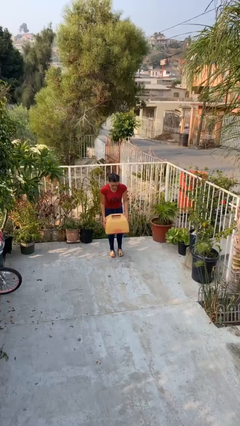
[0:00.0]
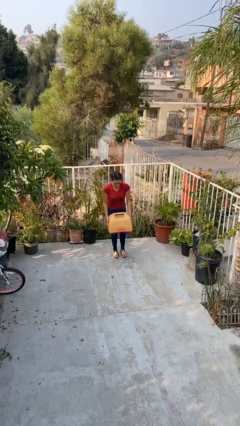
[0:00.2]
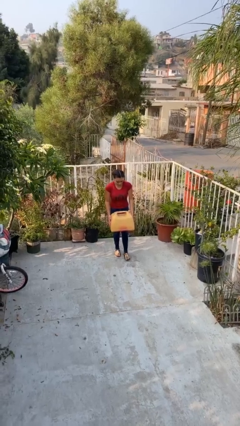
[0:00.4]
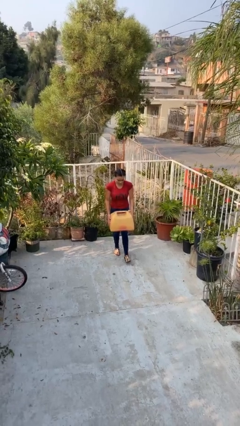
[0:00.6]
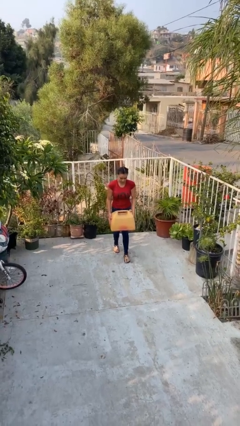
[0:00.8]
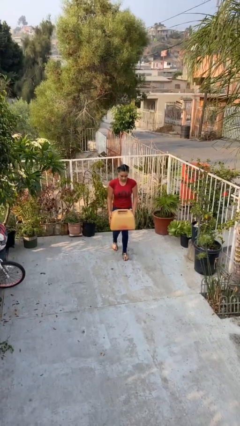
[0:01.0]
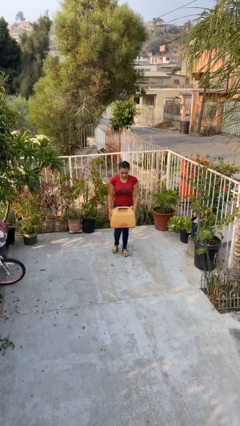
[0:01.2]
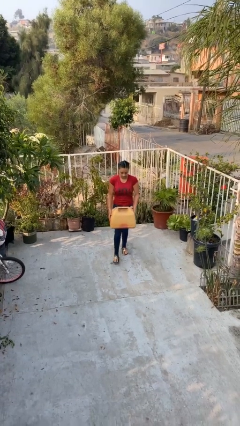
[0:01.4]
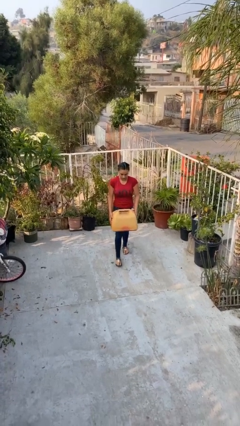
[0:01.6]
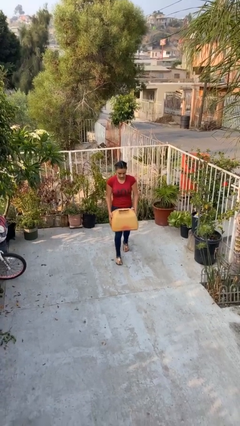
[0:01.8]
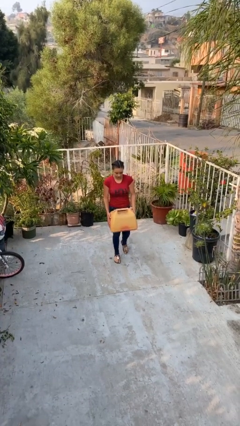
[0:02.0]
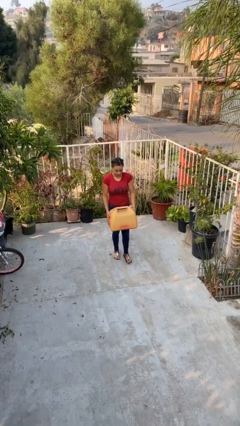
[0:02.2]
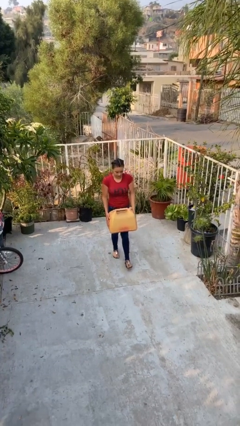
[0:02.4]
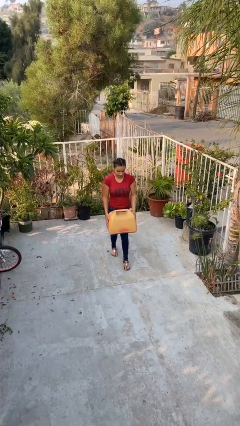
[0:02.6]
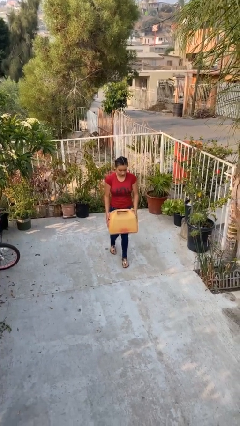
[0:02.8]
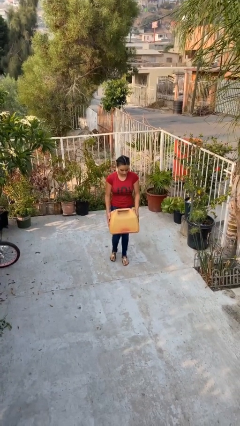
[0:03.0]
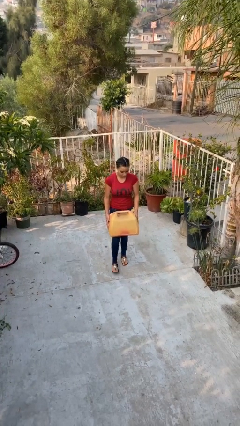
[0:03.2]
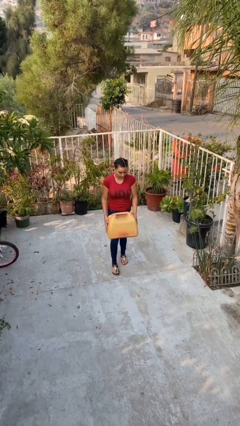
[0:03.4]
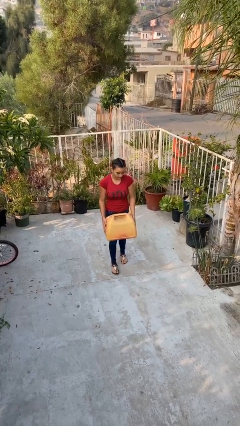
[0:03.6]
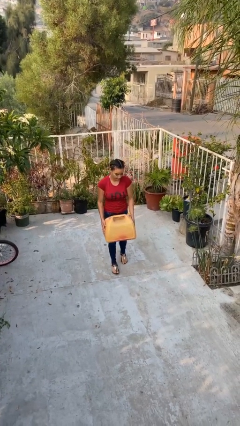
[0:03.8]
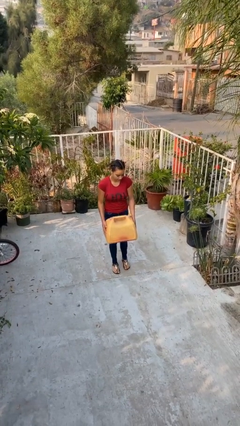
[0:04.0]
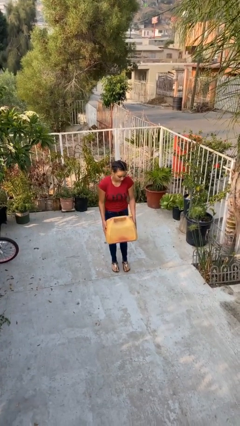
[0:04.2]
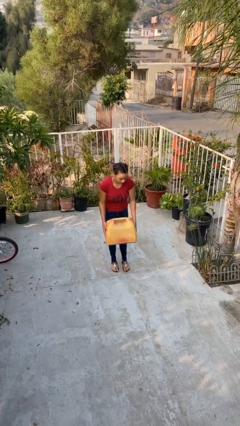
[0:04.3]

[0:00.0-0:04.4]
person carries heavy object

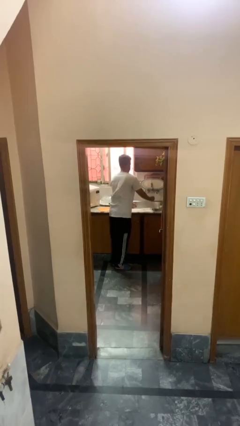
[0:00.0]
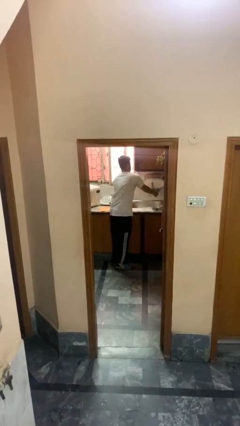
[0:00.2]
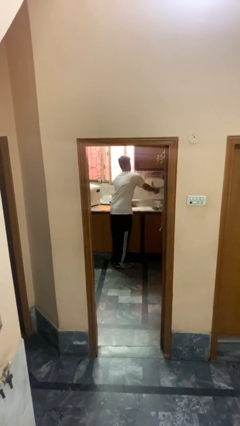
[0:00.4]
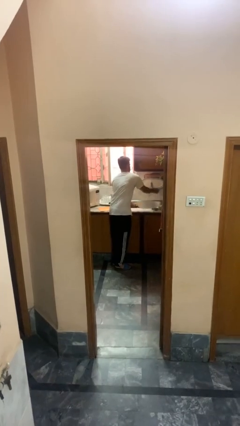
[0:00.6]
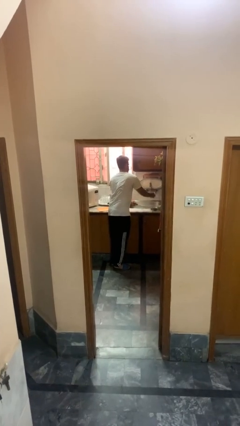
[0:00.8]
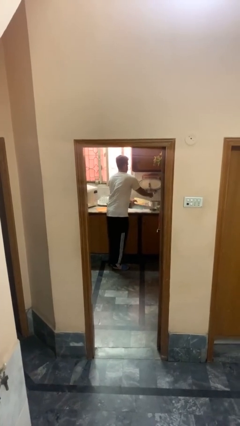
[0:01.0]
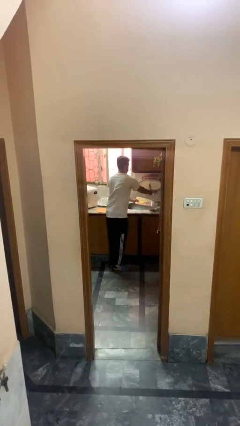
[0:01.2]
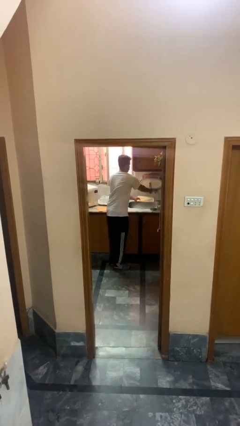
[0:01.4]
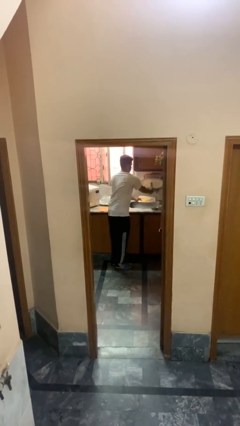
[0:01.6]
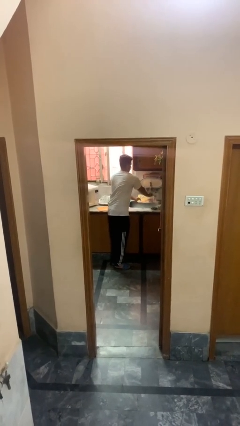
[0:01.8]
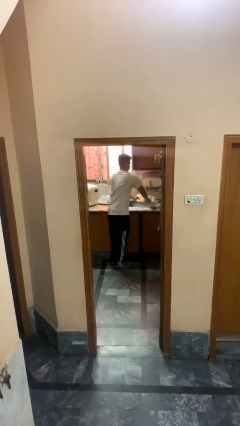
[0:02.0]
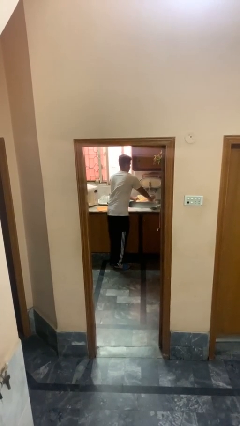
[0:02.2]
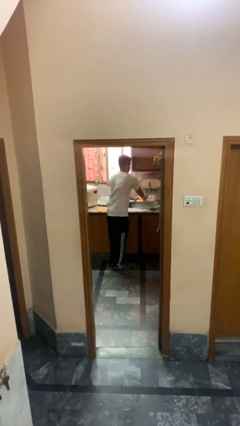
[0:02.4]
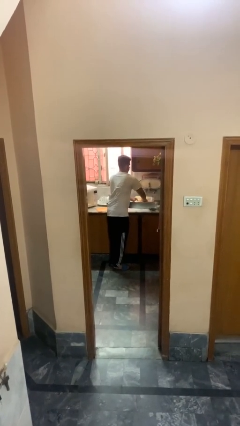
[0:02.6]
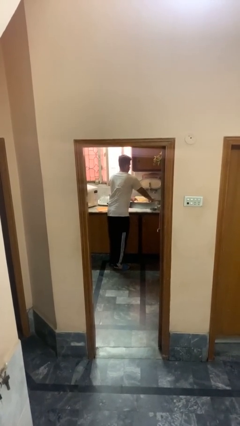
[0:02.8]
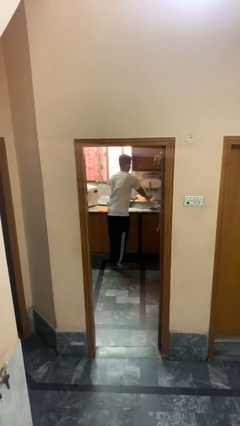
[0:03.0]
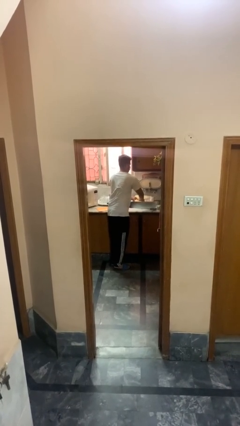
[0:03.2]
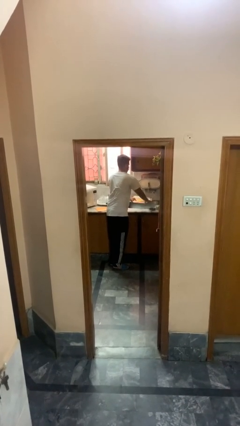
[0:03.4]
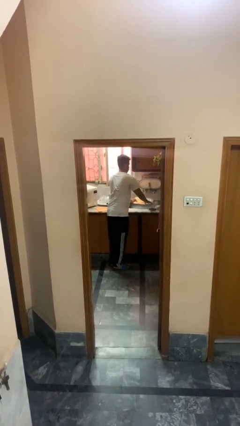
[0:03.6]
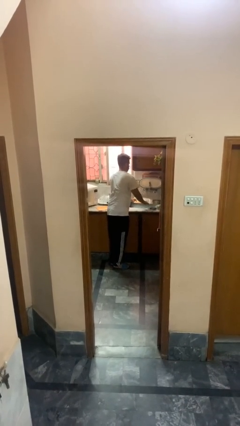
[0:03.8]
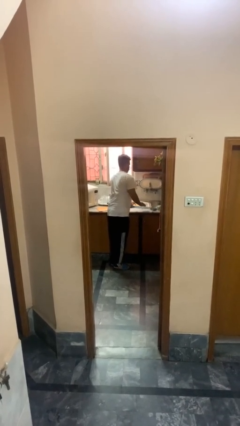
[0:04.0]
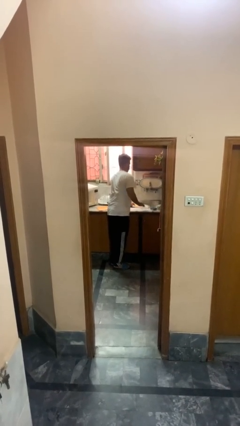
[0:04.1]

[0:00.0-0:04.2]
person washes dish

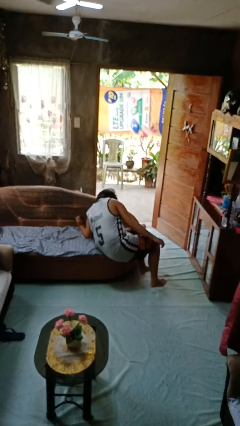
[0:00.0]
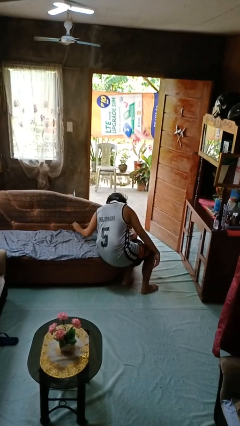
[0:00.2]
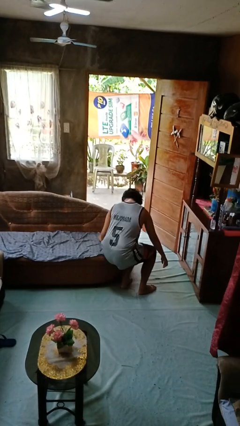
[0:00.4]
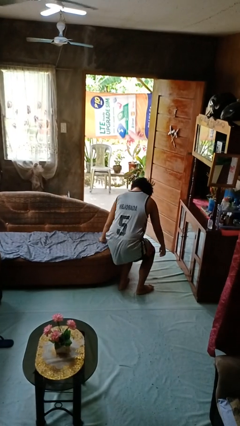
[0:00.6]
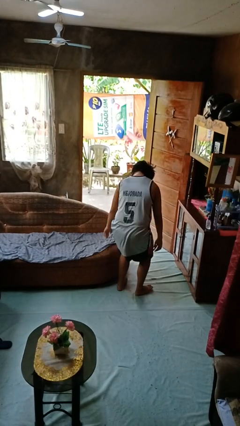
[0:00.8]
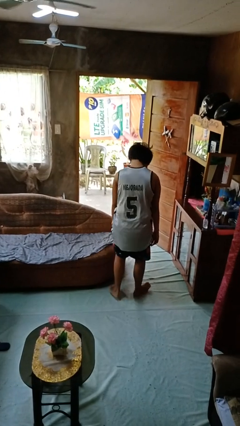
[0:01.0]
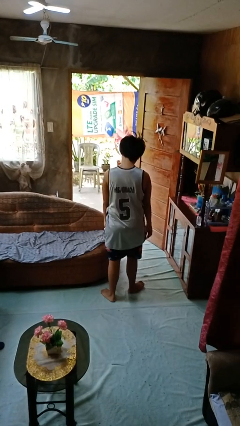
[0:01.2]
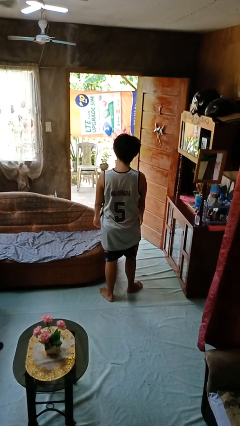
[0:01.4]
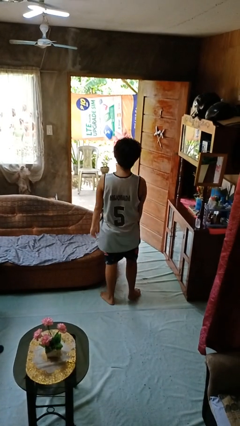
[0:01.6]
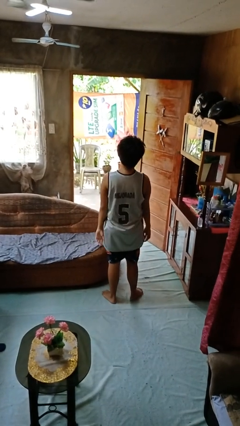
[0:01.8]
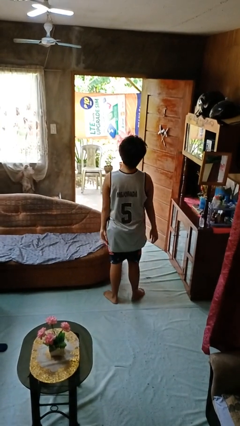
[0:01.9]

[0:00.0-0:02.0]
person stands up

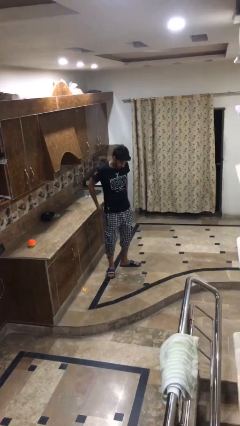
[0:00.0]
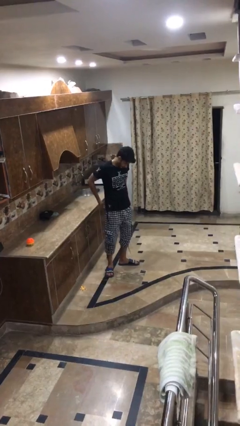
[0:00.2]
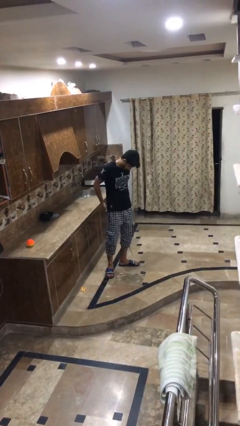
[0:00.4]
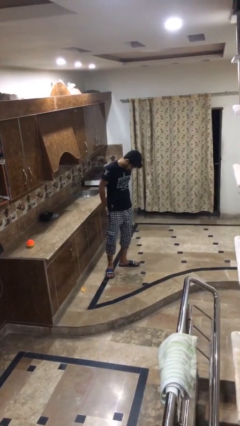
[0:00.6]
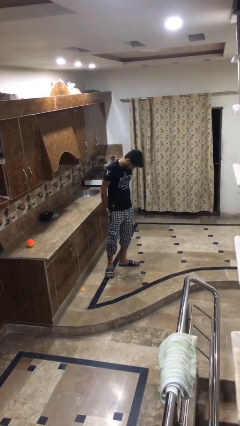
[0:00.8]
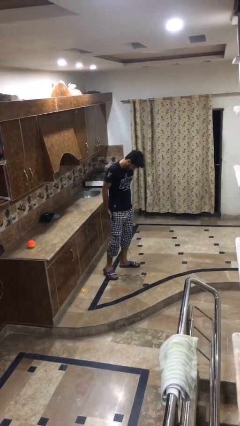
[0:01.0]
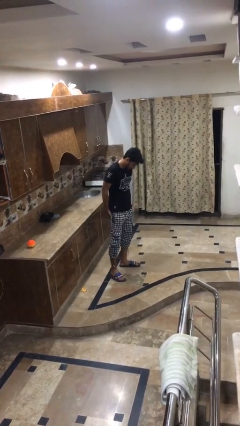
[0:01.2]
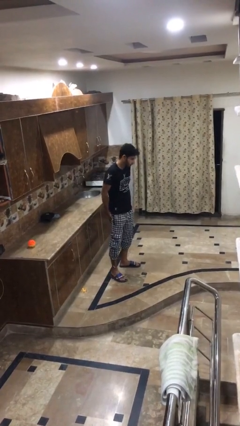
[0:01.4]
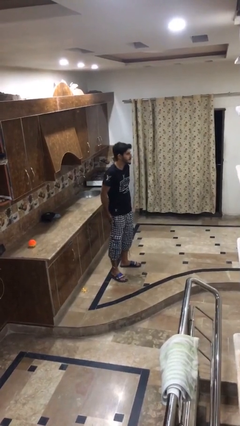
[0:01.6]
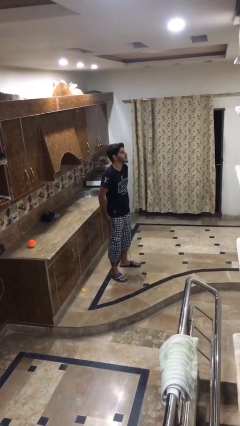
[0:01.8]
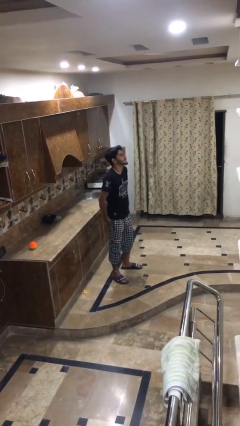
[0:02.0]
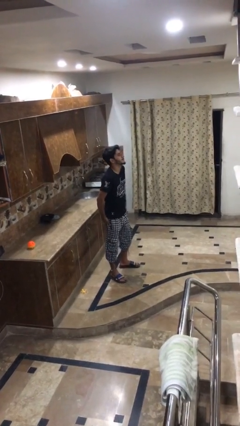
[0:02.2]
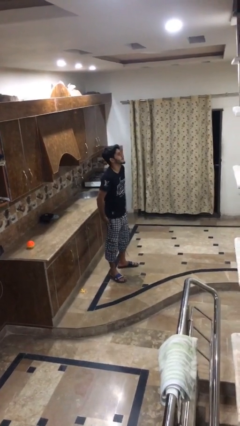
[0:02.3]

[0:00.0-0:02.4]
person puts hands in back pockets

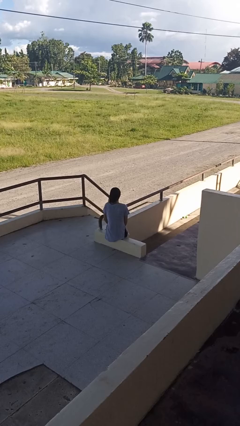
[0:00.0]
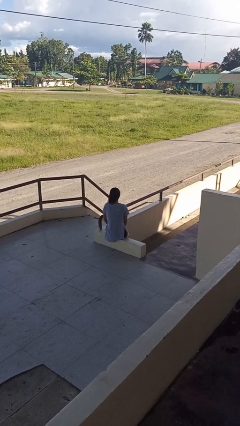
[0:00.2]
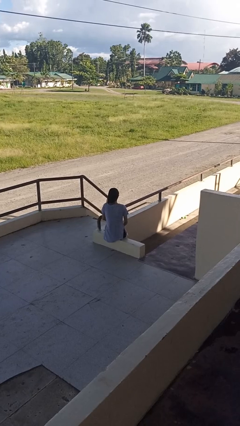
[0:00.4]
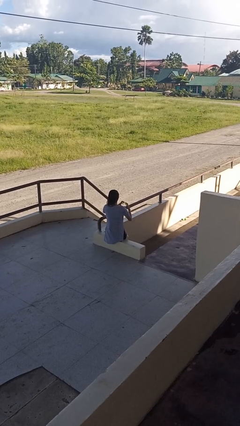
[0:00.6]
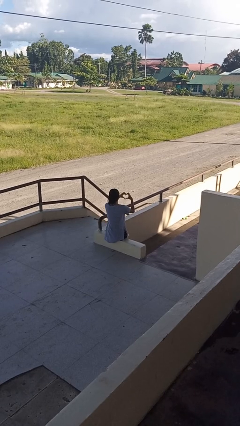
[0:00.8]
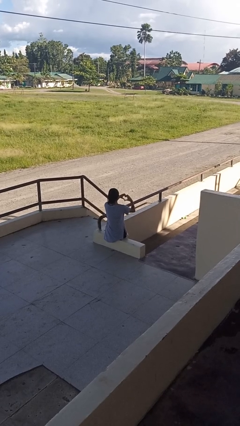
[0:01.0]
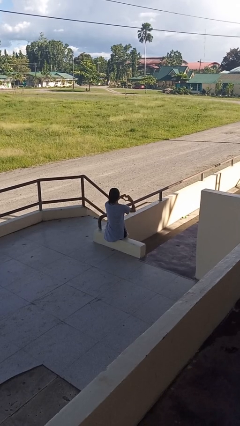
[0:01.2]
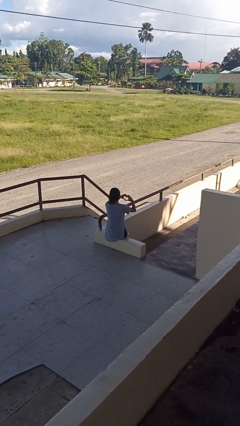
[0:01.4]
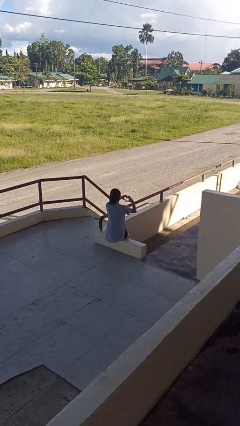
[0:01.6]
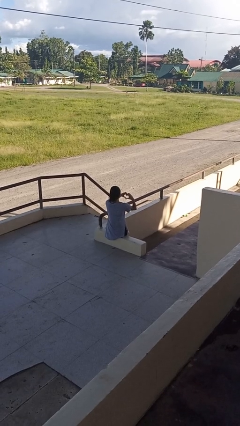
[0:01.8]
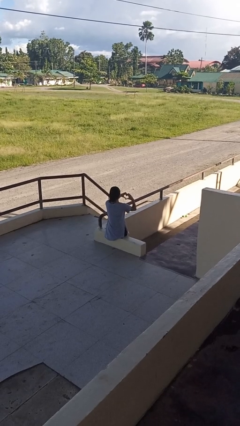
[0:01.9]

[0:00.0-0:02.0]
person gestures heart

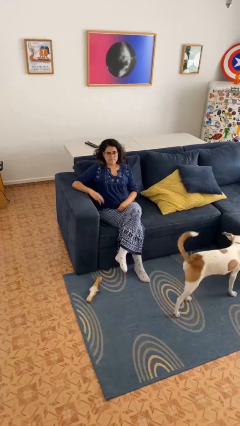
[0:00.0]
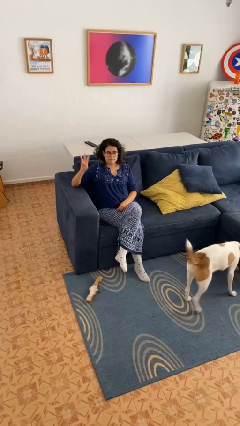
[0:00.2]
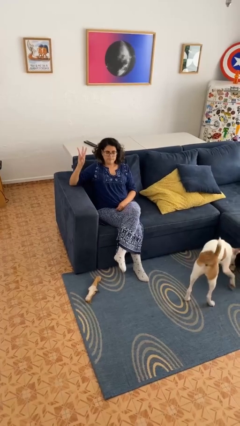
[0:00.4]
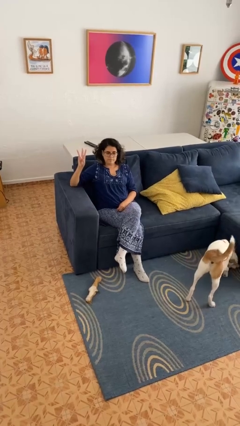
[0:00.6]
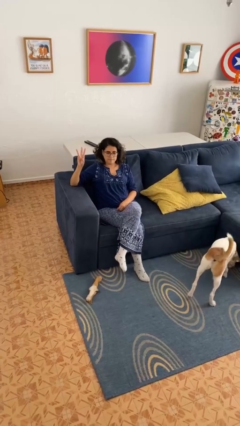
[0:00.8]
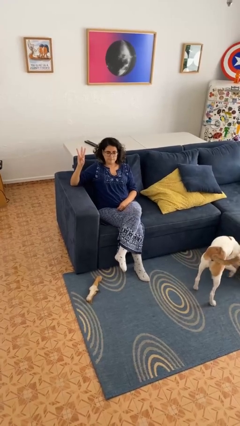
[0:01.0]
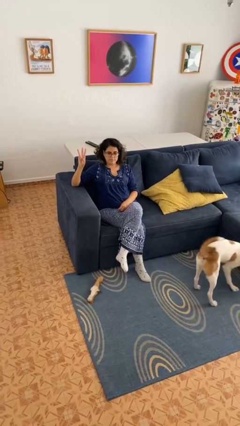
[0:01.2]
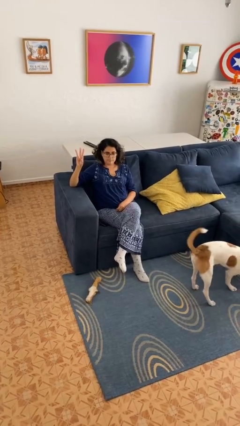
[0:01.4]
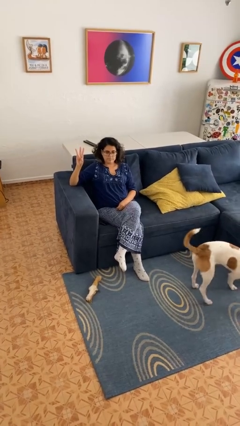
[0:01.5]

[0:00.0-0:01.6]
person gestures number three

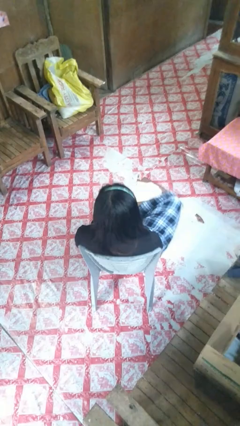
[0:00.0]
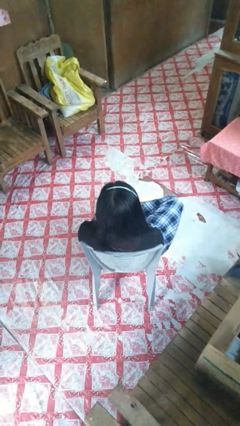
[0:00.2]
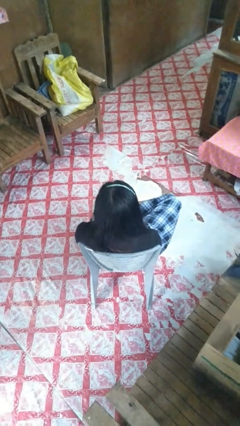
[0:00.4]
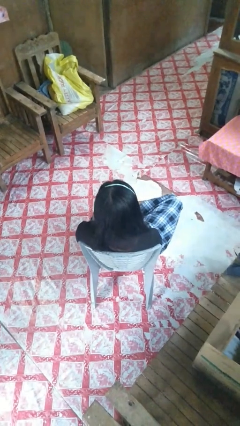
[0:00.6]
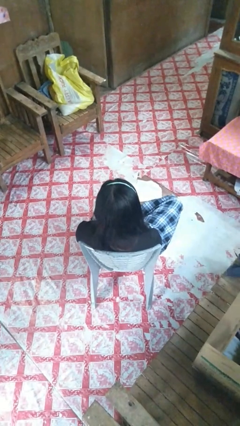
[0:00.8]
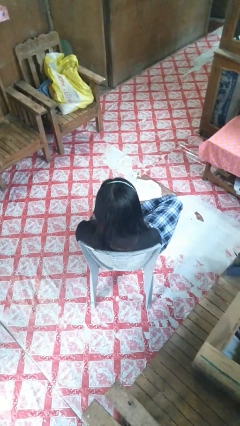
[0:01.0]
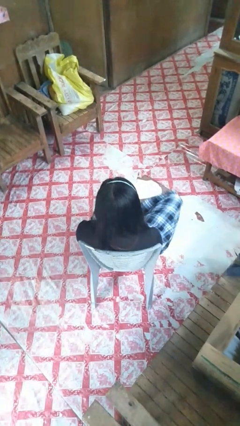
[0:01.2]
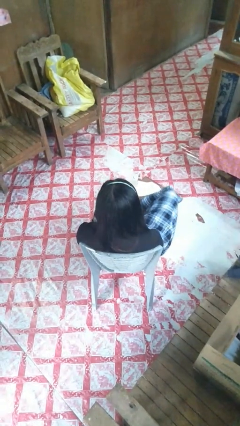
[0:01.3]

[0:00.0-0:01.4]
person crosses legs
